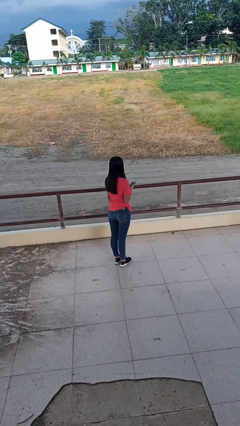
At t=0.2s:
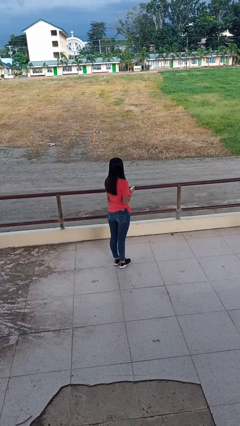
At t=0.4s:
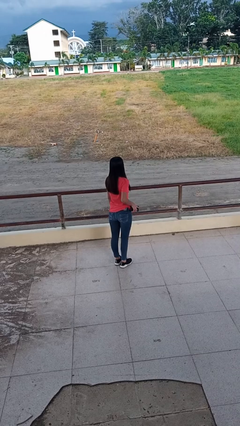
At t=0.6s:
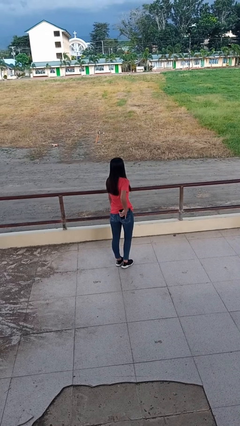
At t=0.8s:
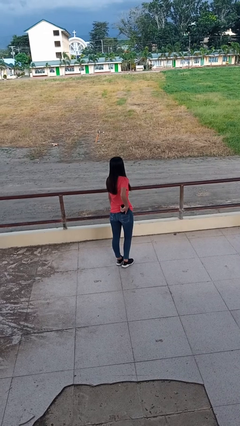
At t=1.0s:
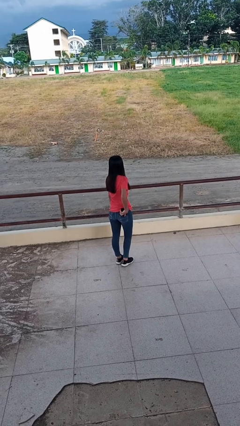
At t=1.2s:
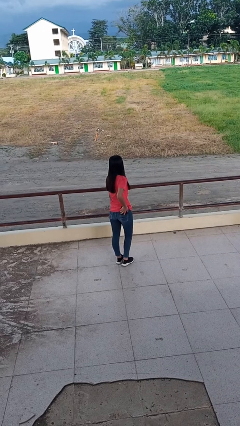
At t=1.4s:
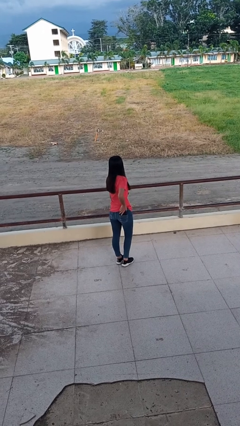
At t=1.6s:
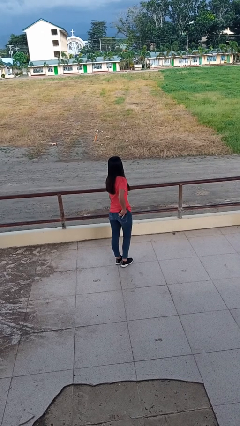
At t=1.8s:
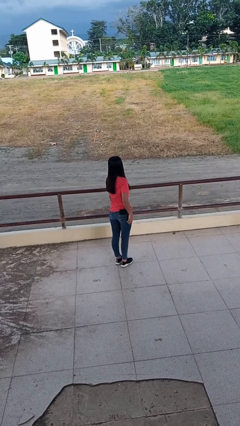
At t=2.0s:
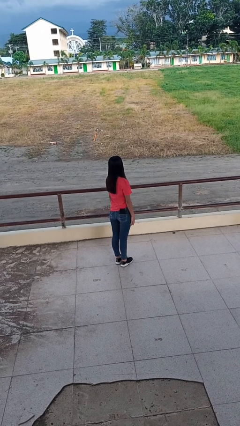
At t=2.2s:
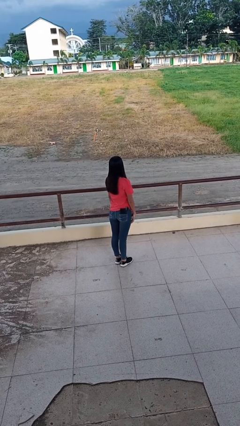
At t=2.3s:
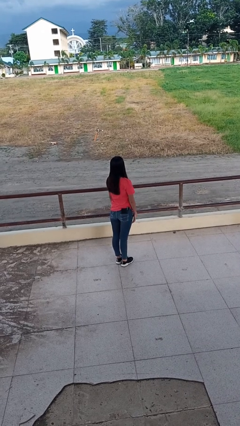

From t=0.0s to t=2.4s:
person puts phone into pocket

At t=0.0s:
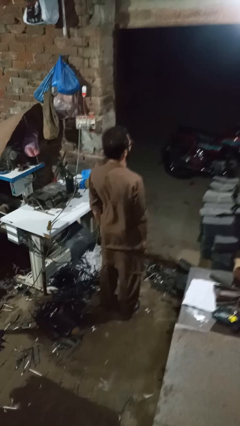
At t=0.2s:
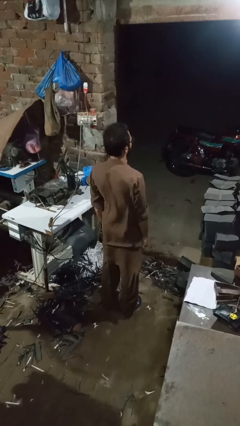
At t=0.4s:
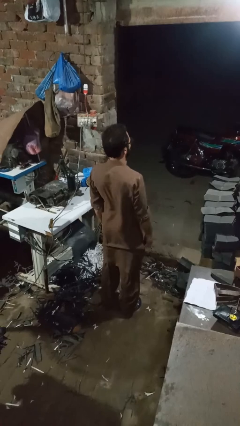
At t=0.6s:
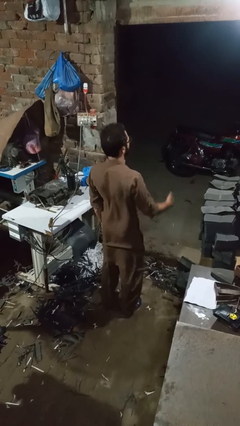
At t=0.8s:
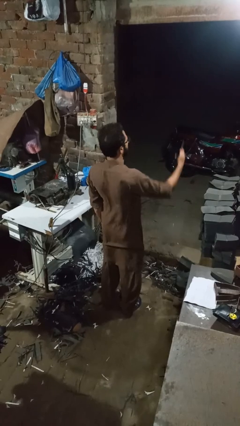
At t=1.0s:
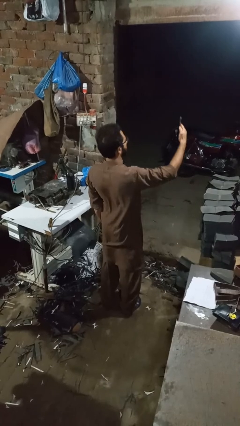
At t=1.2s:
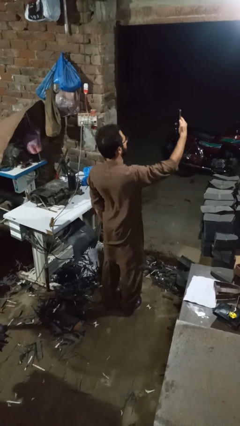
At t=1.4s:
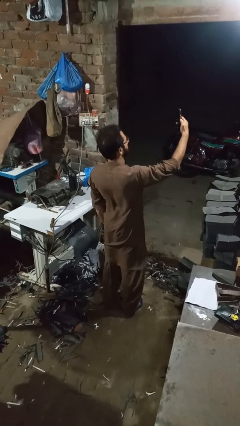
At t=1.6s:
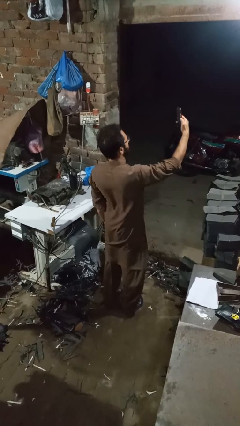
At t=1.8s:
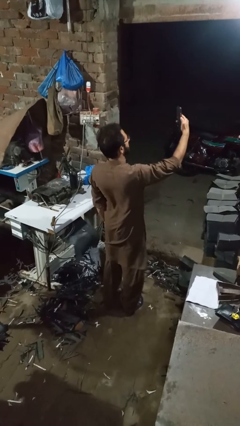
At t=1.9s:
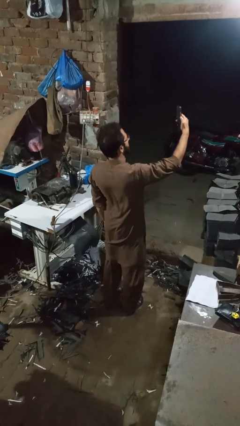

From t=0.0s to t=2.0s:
person takes selfie

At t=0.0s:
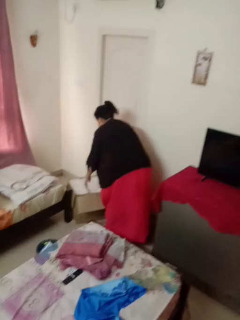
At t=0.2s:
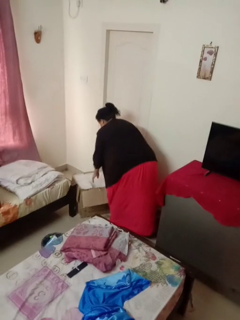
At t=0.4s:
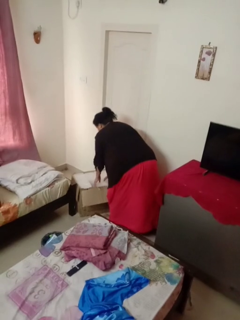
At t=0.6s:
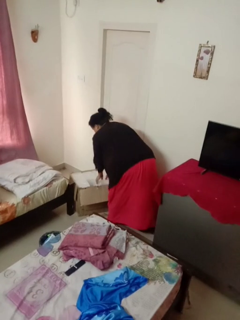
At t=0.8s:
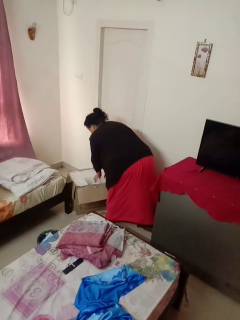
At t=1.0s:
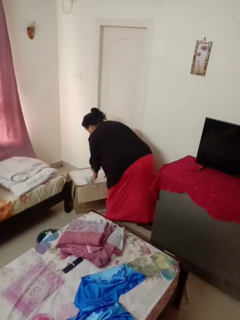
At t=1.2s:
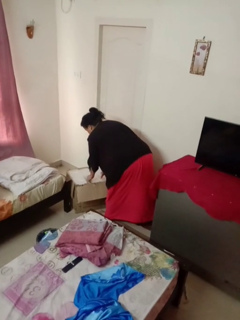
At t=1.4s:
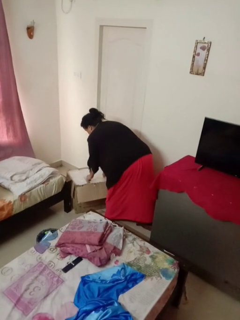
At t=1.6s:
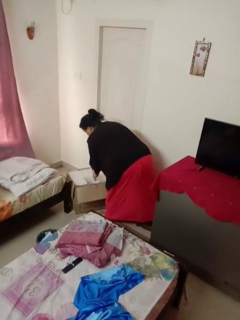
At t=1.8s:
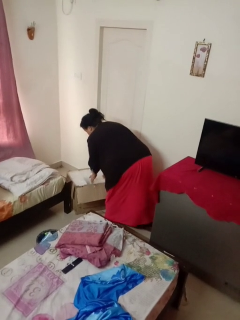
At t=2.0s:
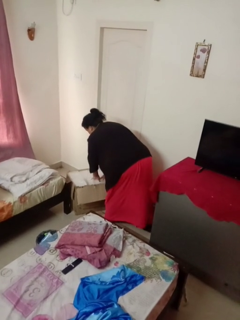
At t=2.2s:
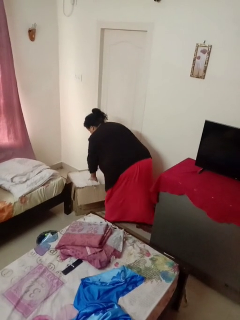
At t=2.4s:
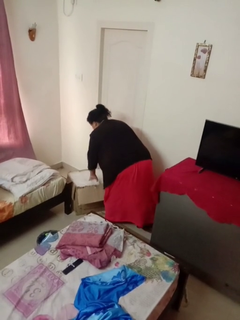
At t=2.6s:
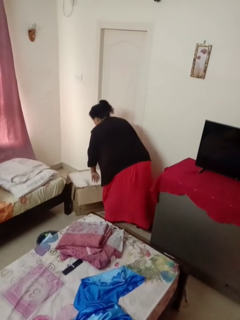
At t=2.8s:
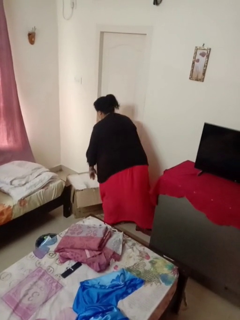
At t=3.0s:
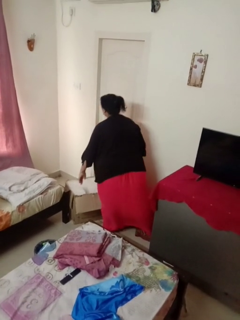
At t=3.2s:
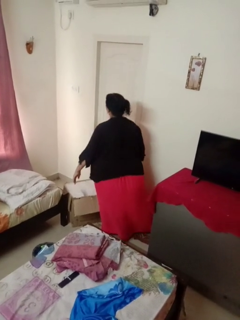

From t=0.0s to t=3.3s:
person searches in box

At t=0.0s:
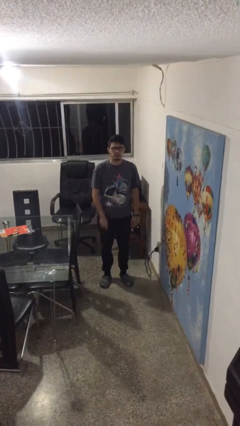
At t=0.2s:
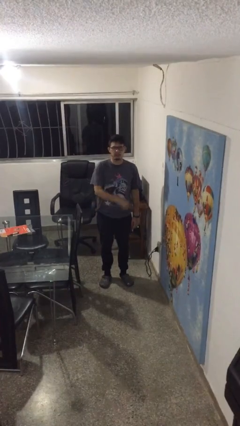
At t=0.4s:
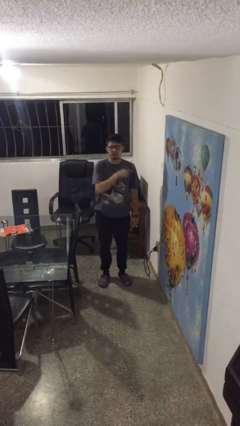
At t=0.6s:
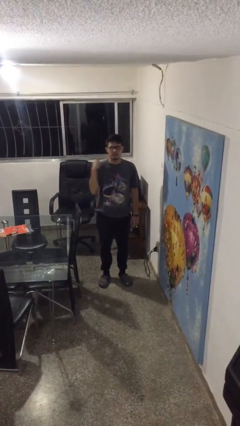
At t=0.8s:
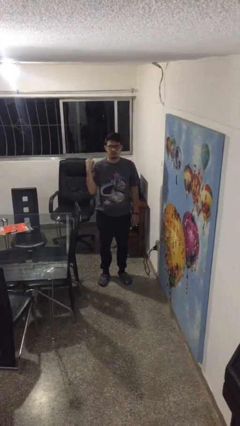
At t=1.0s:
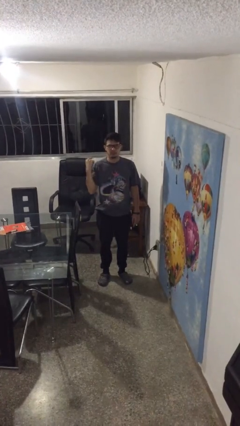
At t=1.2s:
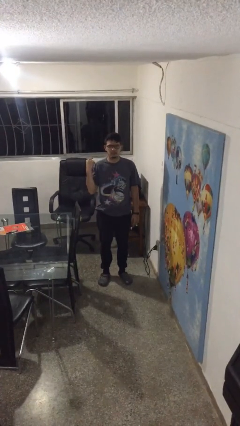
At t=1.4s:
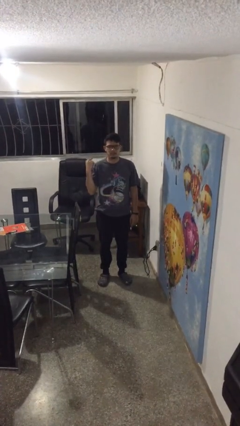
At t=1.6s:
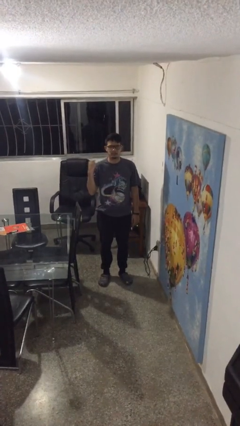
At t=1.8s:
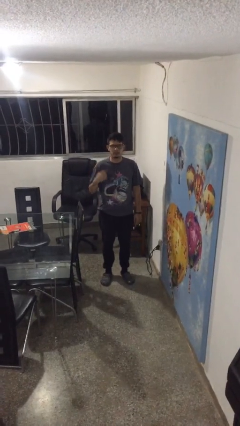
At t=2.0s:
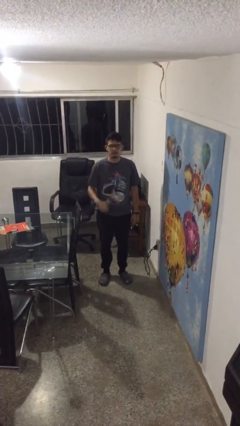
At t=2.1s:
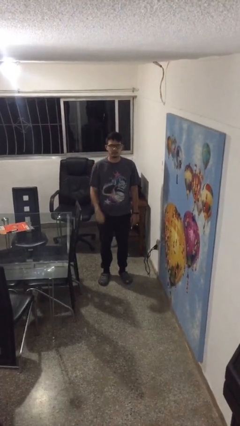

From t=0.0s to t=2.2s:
person gestures cut

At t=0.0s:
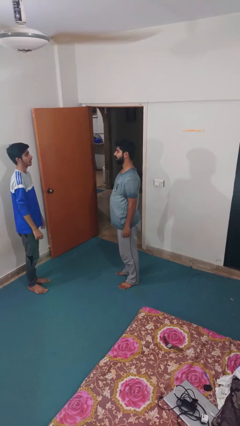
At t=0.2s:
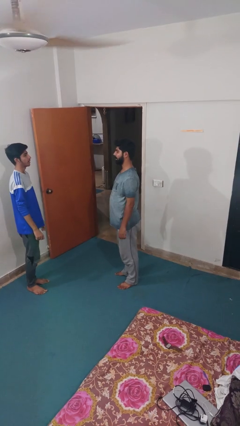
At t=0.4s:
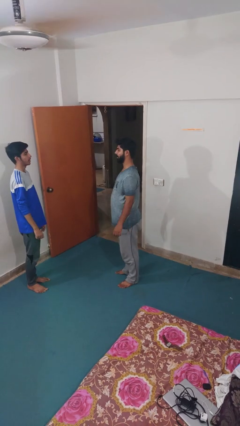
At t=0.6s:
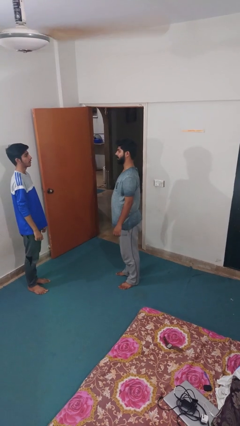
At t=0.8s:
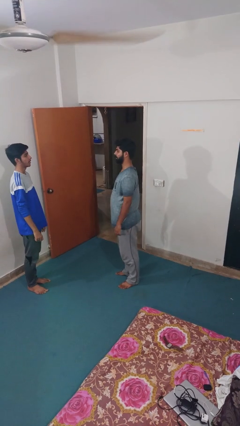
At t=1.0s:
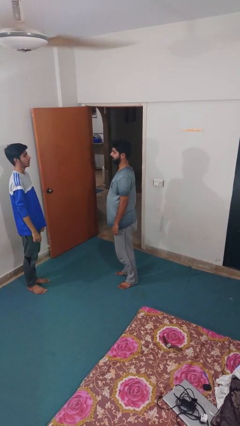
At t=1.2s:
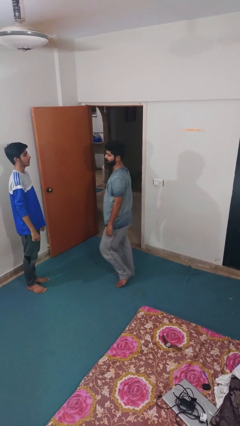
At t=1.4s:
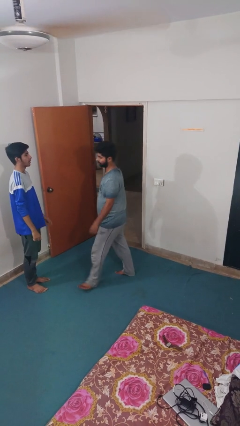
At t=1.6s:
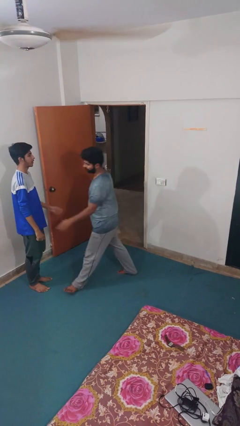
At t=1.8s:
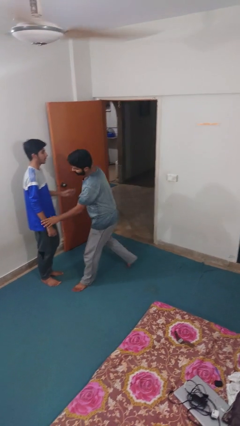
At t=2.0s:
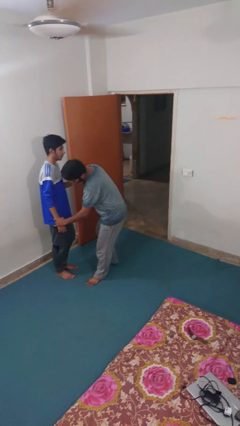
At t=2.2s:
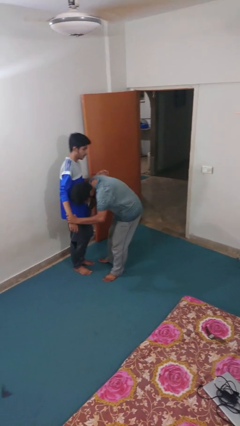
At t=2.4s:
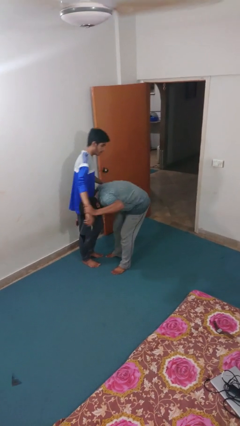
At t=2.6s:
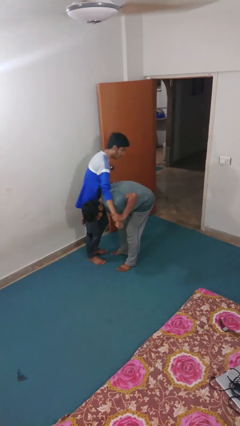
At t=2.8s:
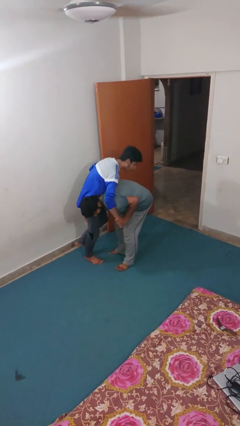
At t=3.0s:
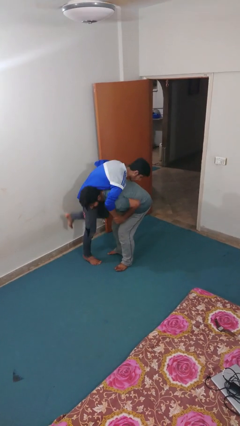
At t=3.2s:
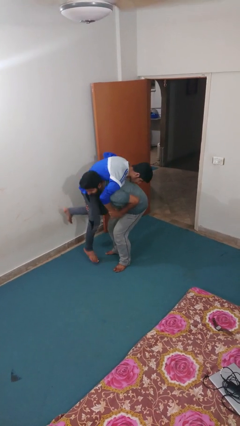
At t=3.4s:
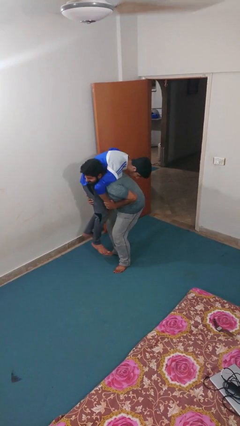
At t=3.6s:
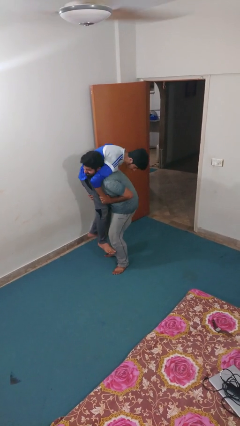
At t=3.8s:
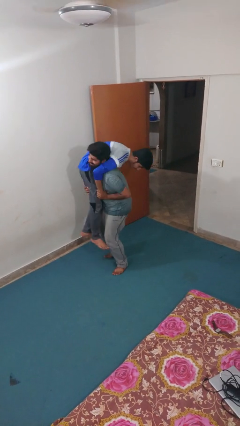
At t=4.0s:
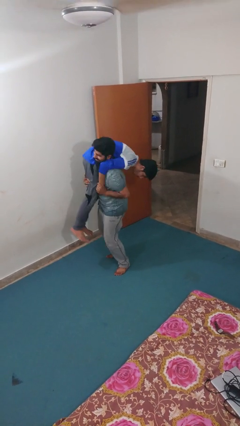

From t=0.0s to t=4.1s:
person carries person over shoulder

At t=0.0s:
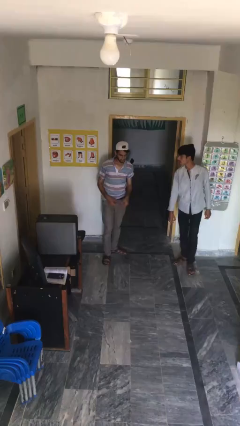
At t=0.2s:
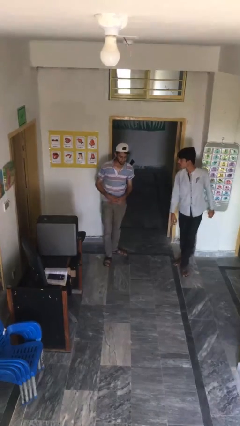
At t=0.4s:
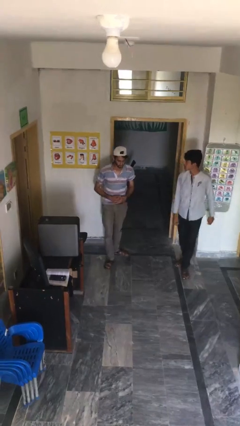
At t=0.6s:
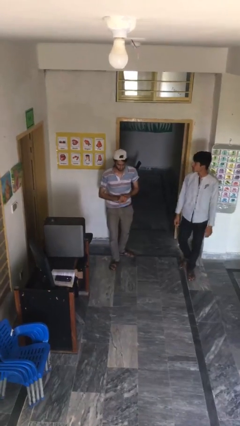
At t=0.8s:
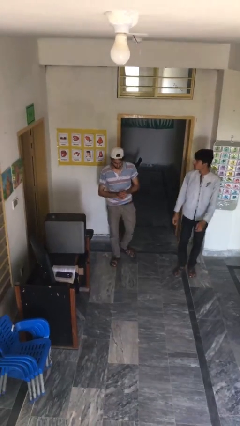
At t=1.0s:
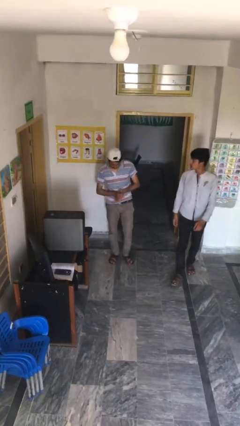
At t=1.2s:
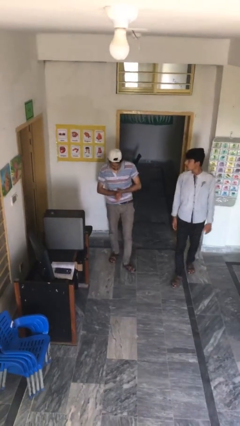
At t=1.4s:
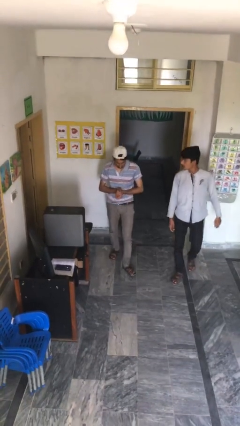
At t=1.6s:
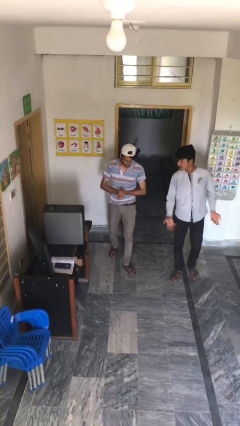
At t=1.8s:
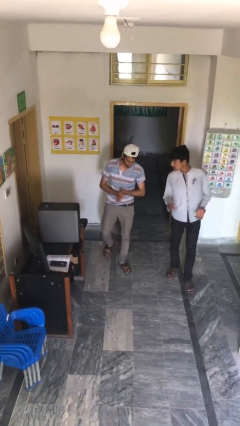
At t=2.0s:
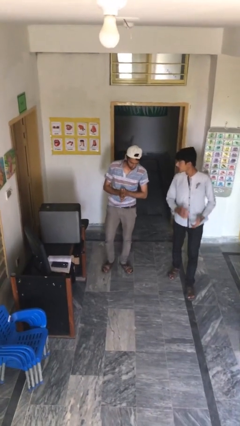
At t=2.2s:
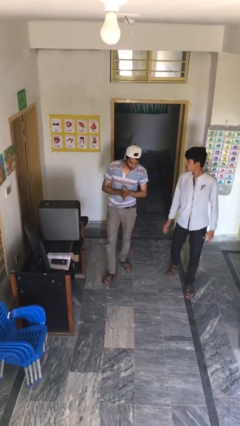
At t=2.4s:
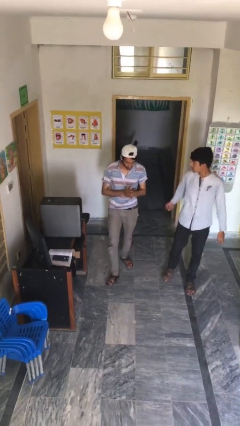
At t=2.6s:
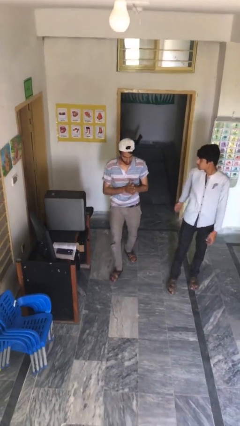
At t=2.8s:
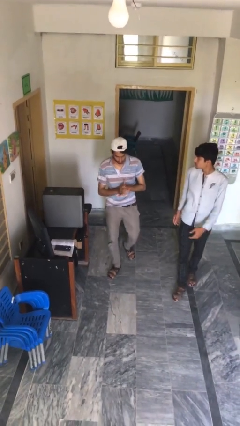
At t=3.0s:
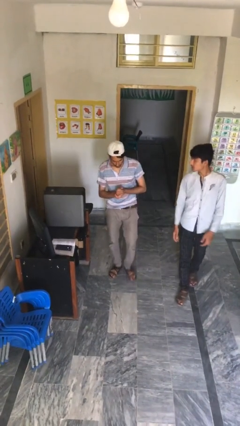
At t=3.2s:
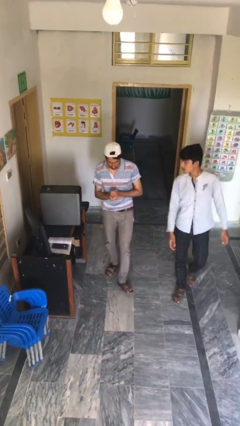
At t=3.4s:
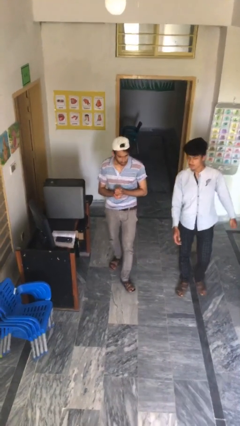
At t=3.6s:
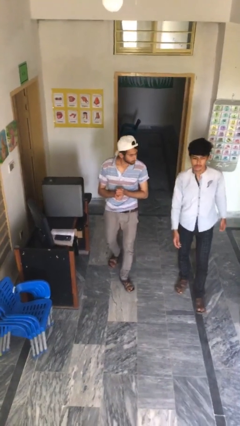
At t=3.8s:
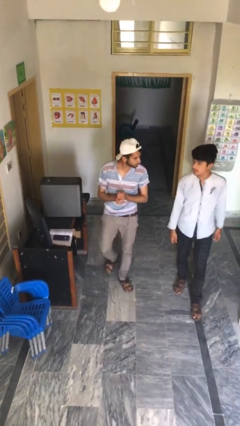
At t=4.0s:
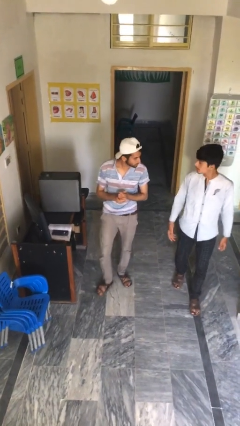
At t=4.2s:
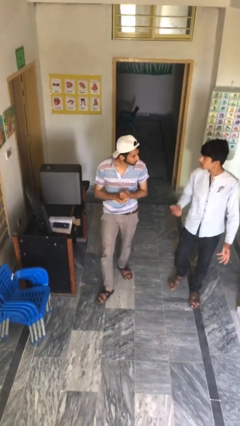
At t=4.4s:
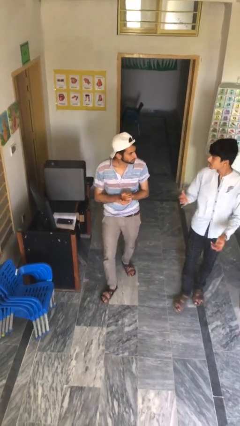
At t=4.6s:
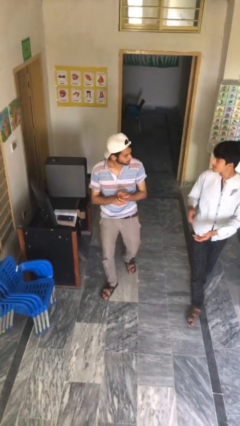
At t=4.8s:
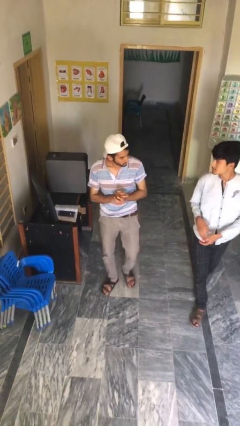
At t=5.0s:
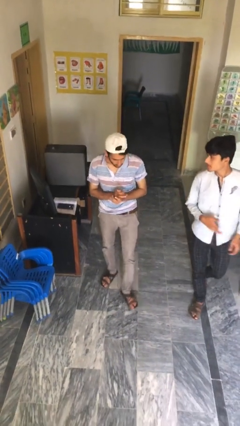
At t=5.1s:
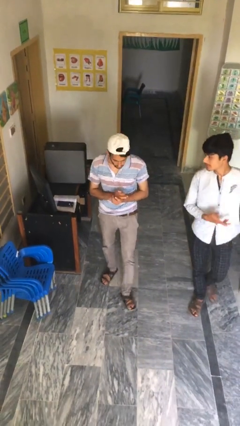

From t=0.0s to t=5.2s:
person talks to person
